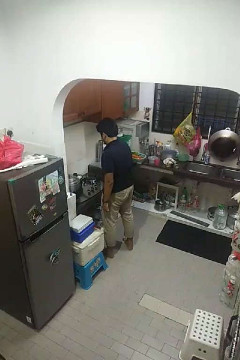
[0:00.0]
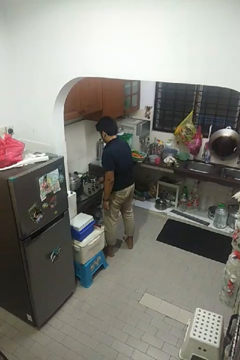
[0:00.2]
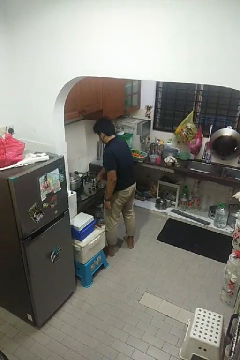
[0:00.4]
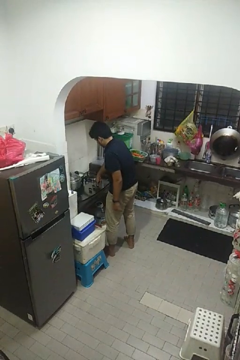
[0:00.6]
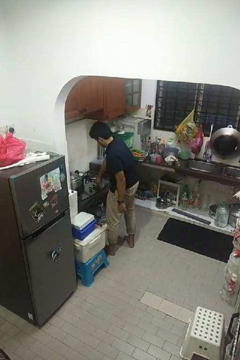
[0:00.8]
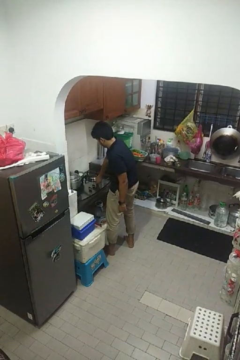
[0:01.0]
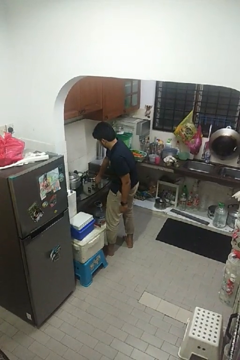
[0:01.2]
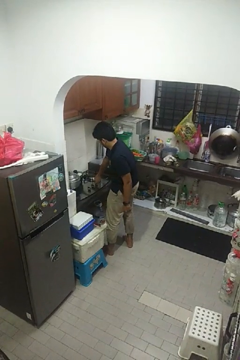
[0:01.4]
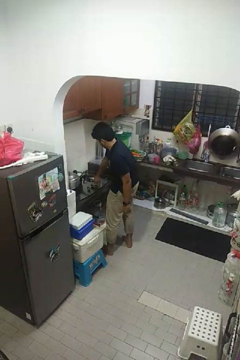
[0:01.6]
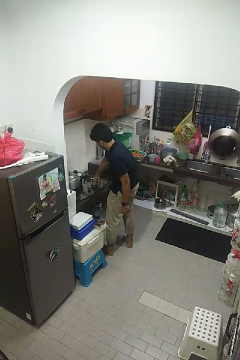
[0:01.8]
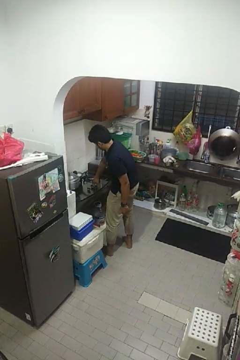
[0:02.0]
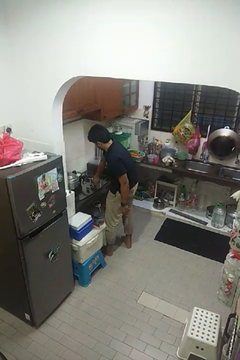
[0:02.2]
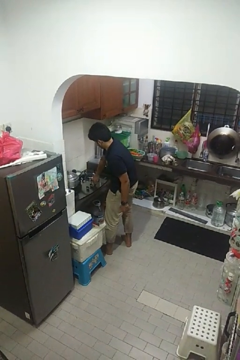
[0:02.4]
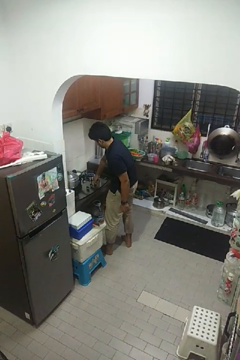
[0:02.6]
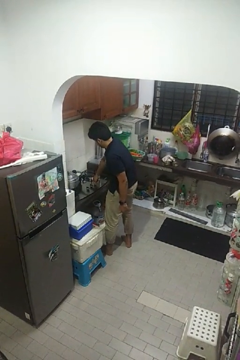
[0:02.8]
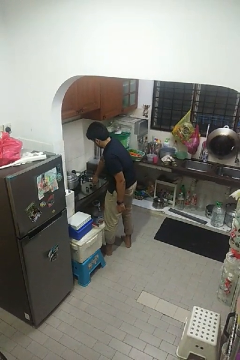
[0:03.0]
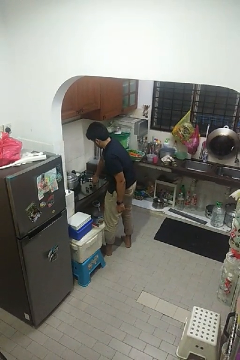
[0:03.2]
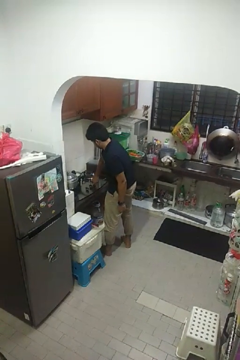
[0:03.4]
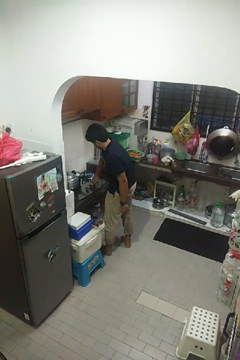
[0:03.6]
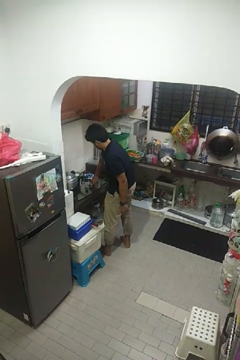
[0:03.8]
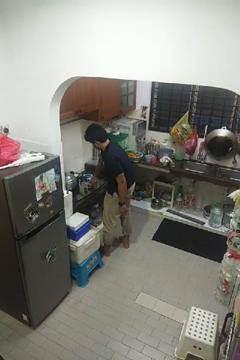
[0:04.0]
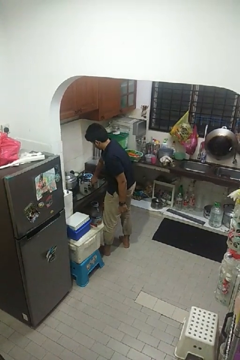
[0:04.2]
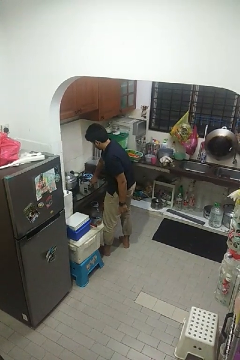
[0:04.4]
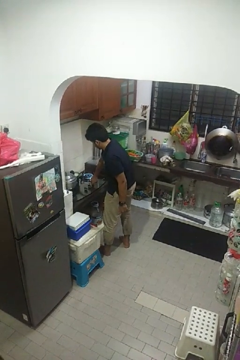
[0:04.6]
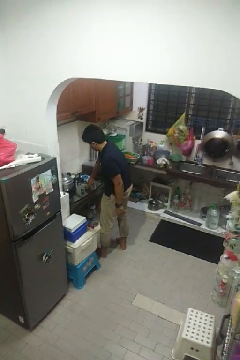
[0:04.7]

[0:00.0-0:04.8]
person turns on stovetop

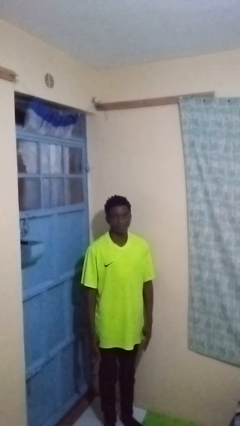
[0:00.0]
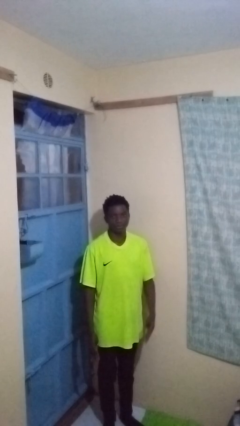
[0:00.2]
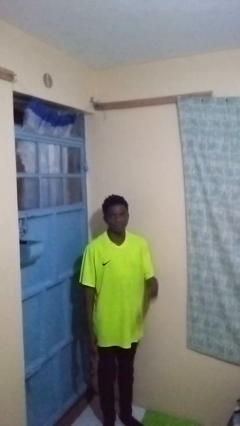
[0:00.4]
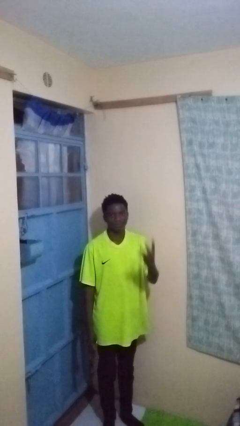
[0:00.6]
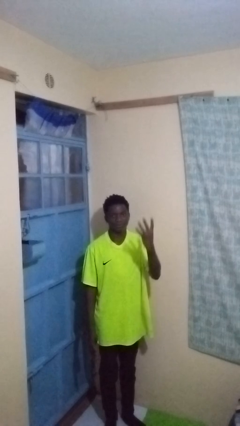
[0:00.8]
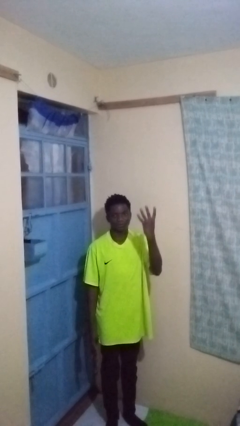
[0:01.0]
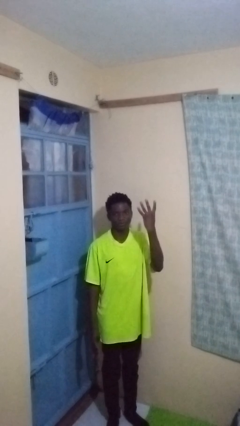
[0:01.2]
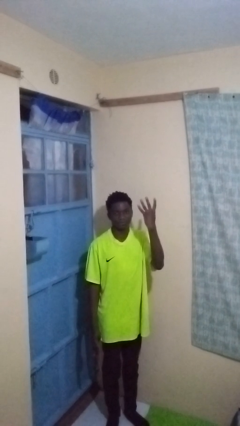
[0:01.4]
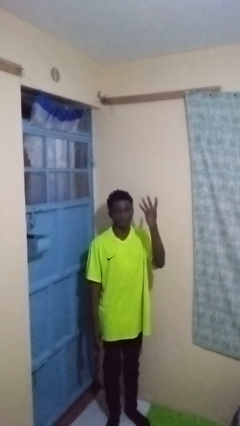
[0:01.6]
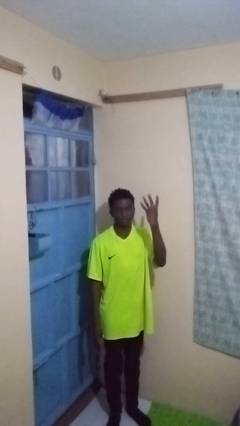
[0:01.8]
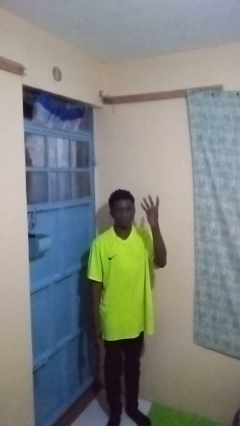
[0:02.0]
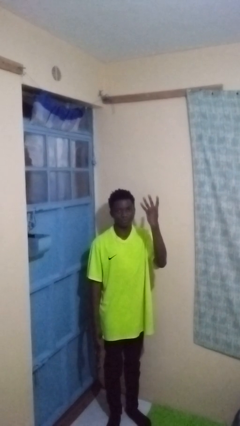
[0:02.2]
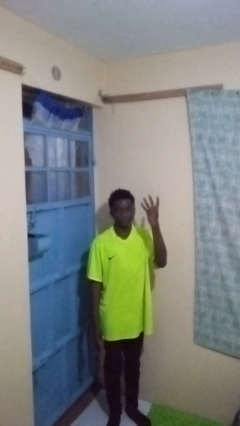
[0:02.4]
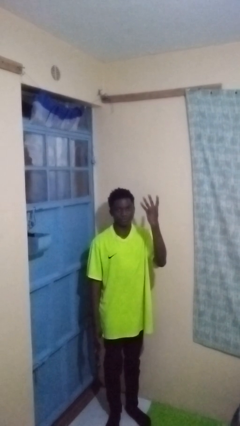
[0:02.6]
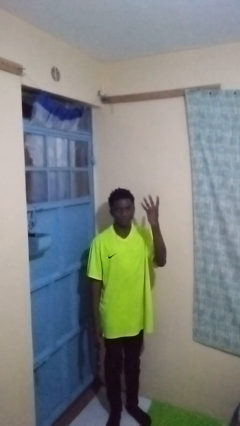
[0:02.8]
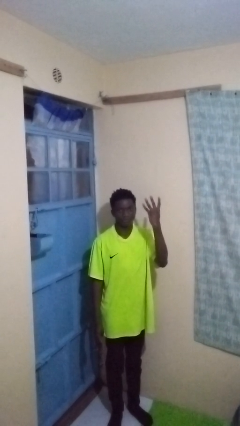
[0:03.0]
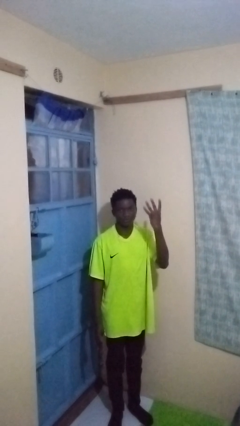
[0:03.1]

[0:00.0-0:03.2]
person gestures number four

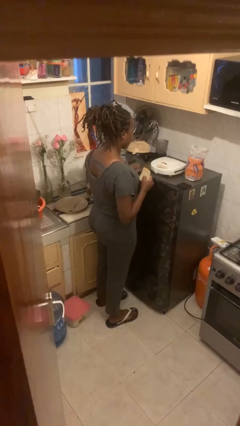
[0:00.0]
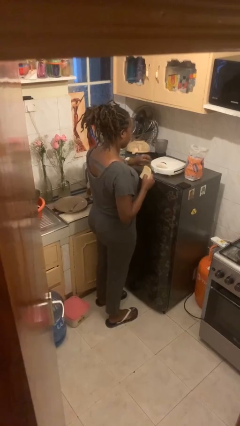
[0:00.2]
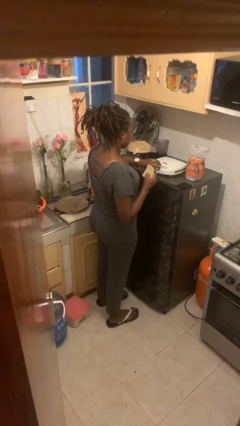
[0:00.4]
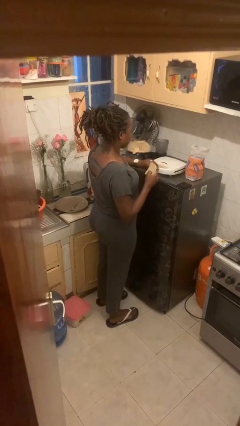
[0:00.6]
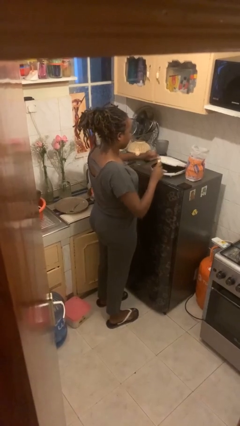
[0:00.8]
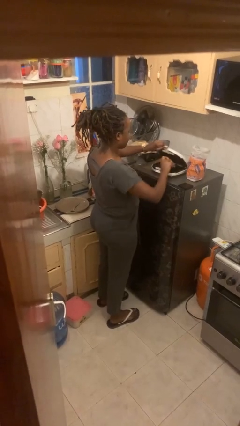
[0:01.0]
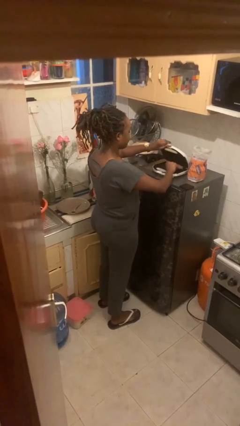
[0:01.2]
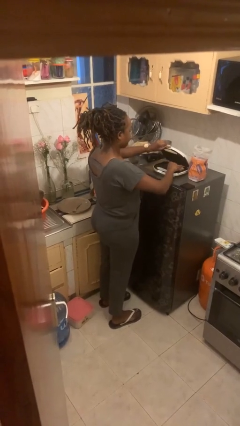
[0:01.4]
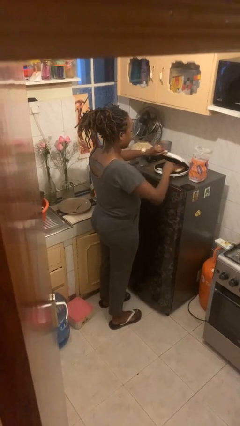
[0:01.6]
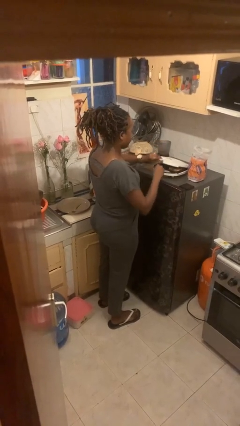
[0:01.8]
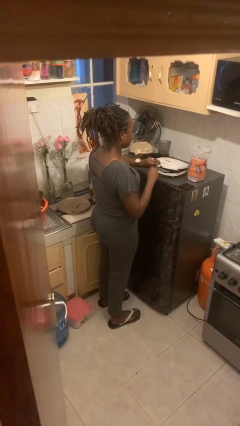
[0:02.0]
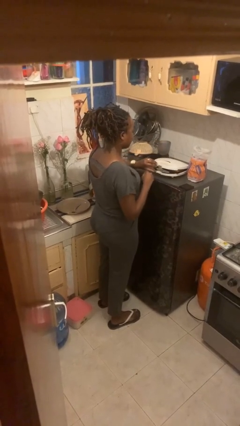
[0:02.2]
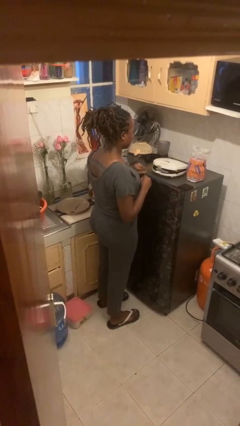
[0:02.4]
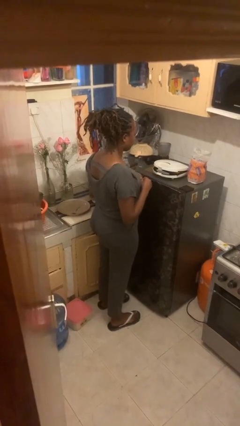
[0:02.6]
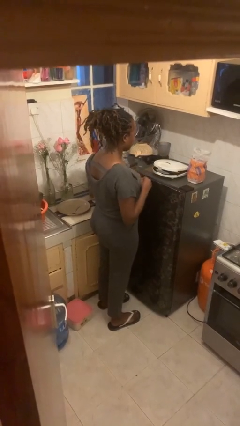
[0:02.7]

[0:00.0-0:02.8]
person puts object into toaster

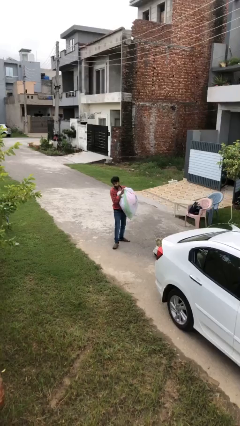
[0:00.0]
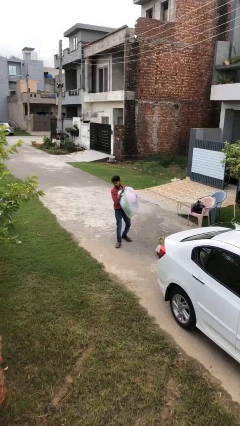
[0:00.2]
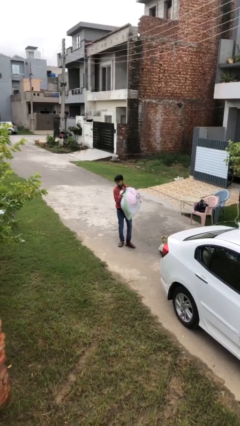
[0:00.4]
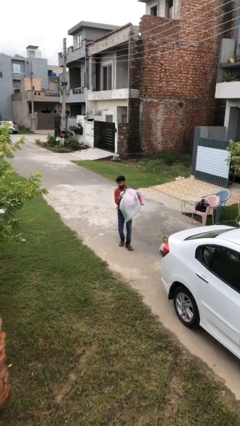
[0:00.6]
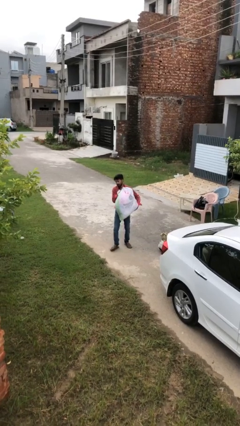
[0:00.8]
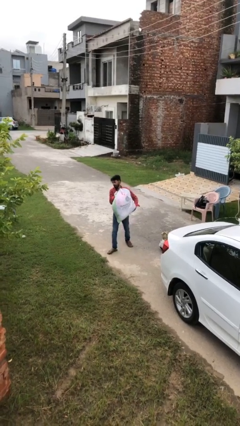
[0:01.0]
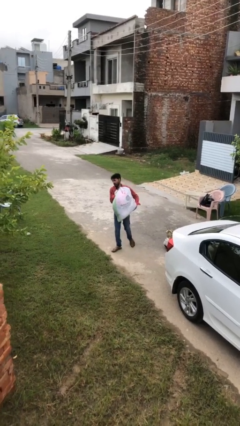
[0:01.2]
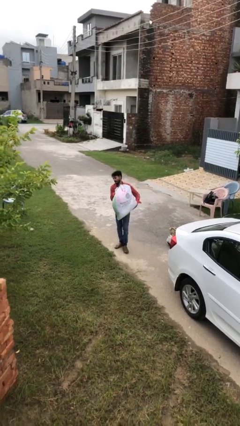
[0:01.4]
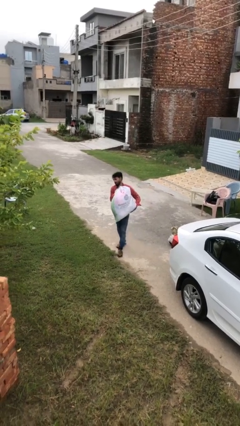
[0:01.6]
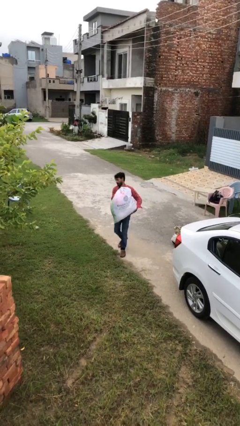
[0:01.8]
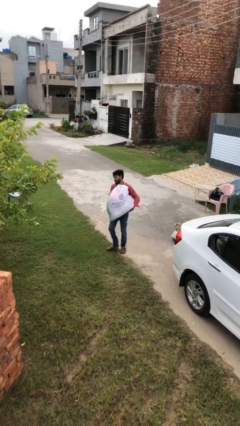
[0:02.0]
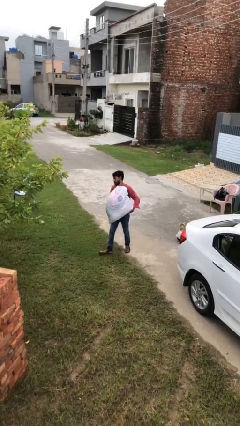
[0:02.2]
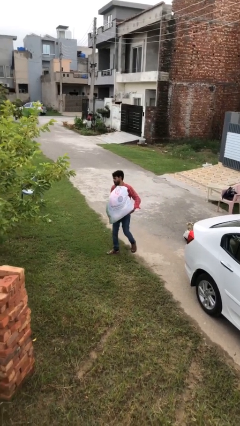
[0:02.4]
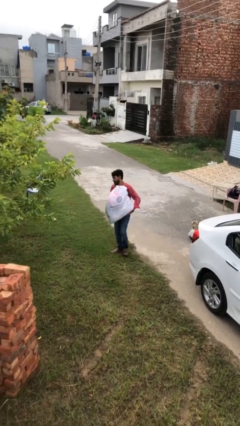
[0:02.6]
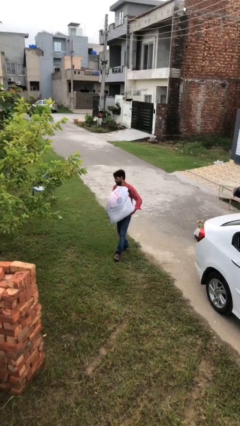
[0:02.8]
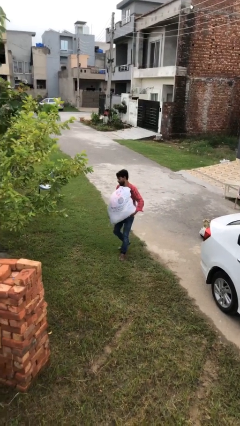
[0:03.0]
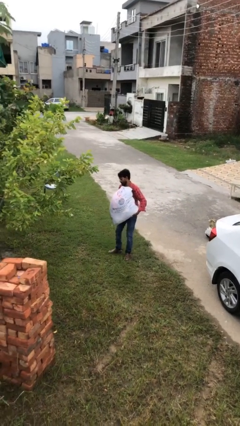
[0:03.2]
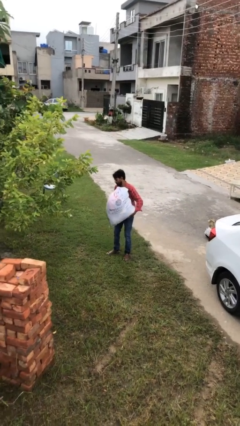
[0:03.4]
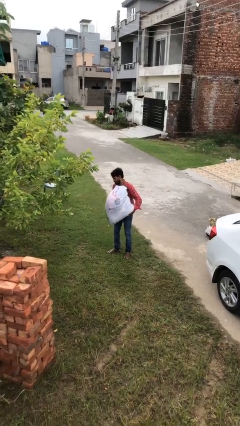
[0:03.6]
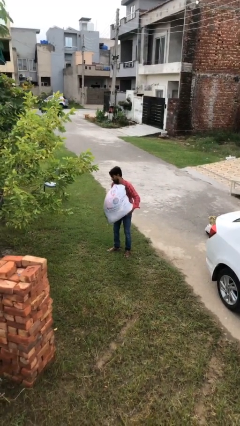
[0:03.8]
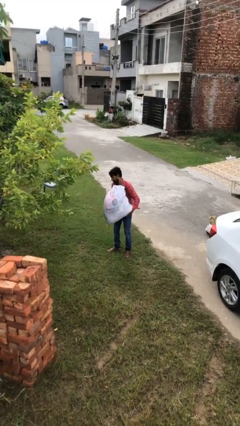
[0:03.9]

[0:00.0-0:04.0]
person carries heavy object

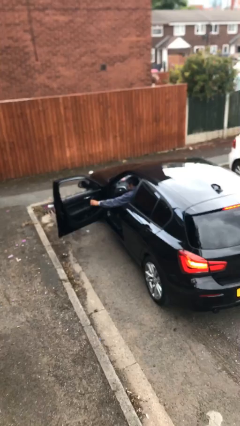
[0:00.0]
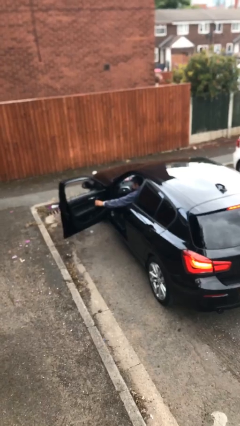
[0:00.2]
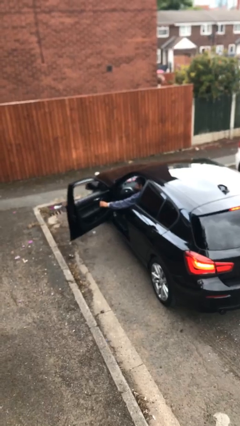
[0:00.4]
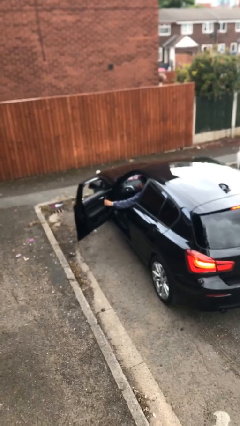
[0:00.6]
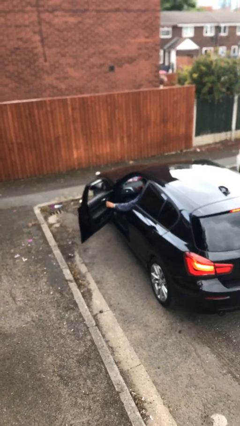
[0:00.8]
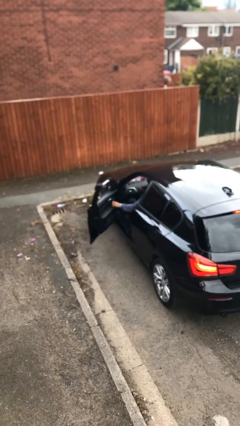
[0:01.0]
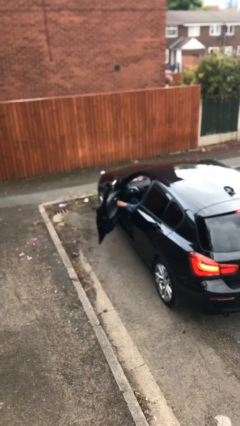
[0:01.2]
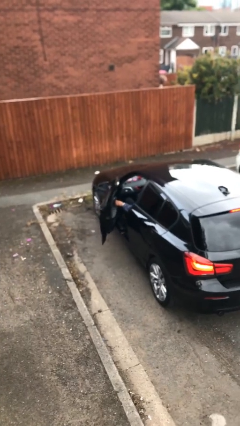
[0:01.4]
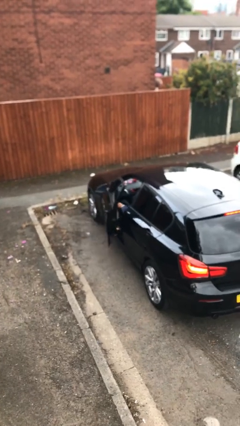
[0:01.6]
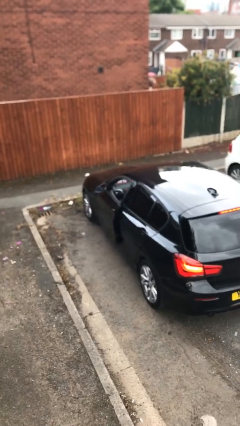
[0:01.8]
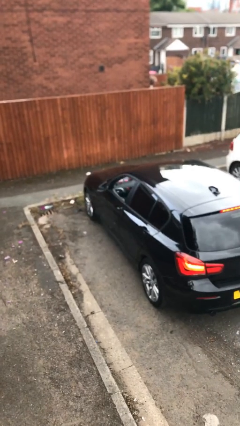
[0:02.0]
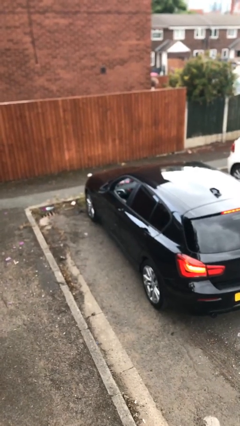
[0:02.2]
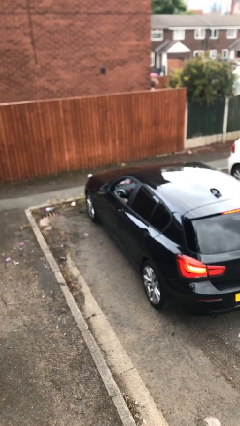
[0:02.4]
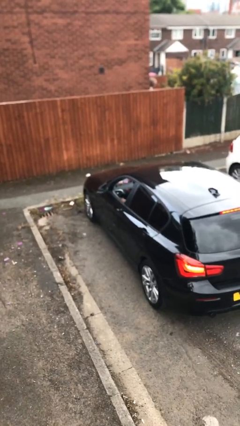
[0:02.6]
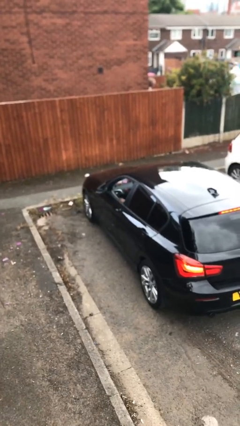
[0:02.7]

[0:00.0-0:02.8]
person closes car door

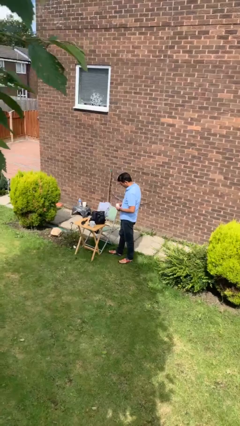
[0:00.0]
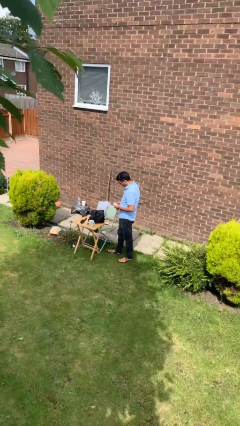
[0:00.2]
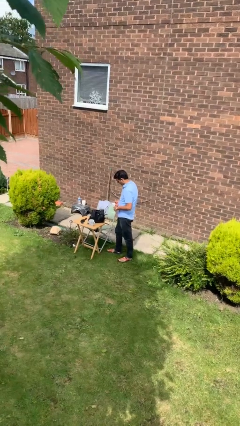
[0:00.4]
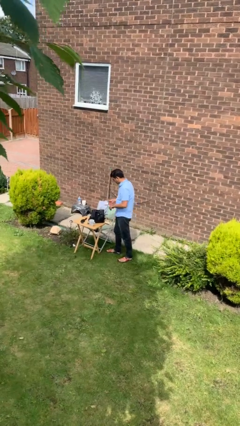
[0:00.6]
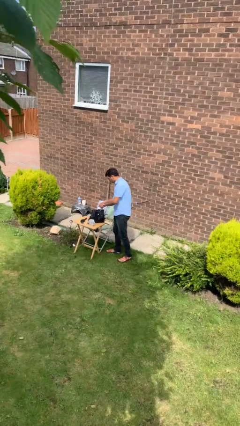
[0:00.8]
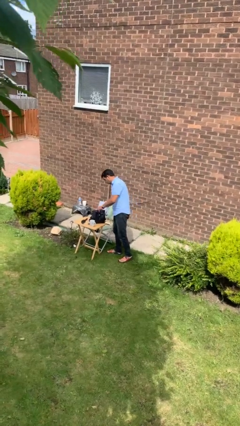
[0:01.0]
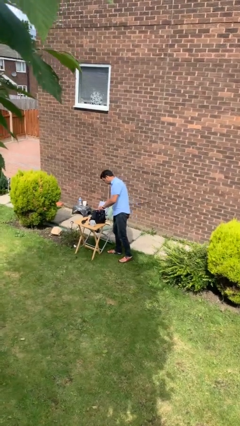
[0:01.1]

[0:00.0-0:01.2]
person puts object into backpack
